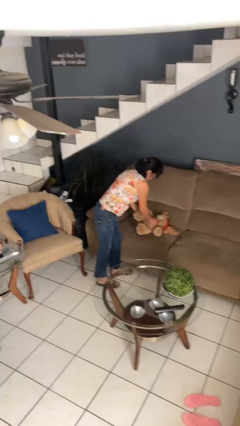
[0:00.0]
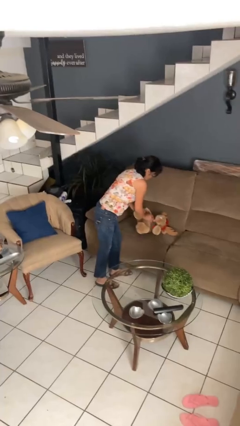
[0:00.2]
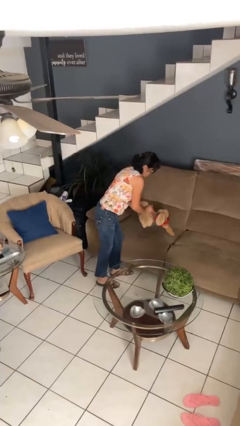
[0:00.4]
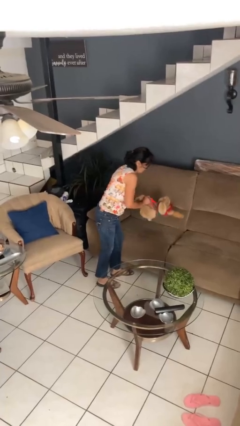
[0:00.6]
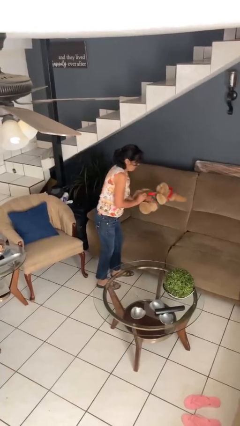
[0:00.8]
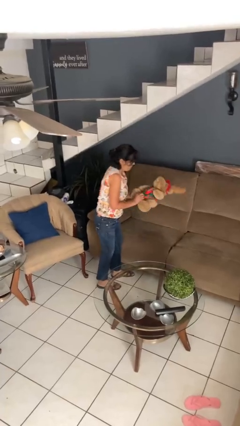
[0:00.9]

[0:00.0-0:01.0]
person picks up object from couch

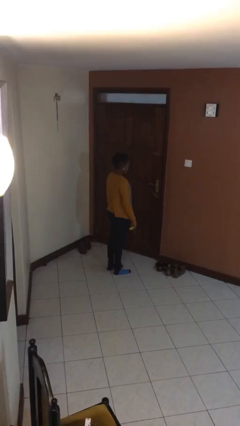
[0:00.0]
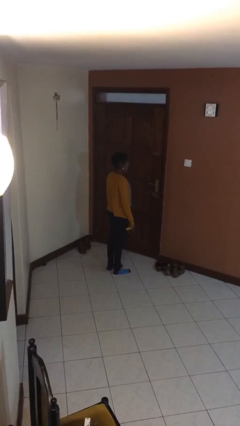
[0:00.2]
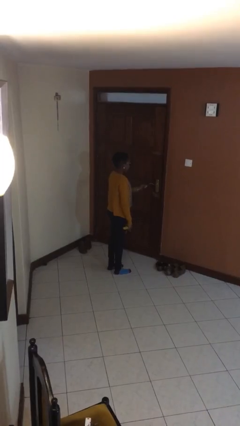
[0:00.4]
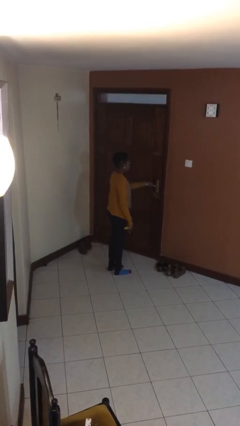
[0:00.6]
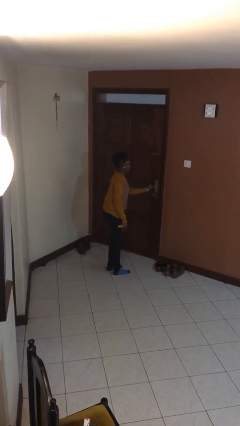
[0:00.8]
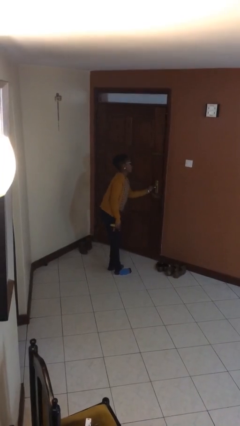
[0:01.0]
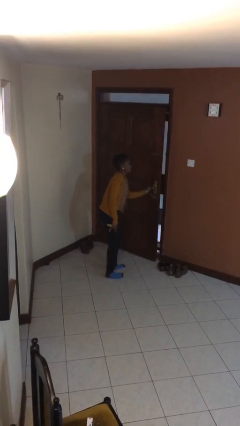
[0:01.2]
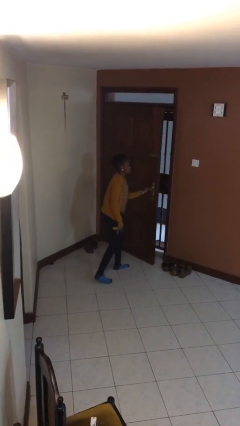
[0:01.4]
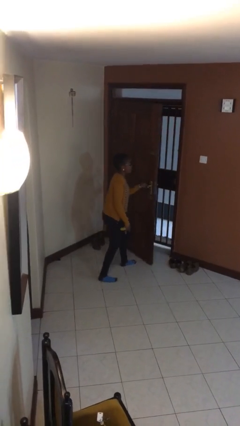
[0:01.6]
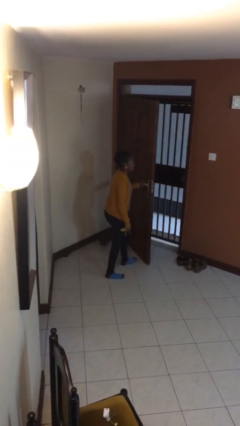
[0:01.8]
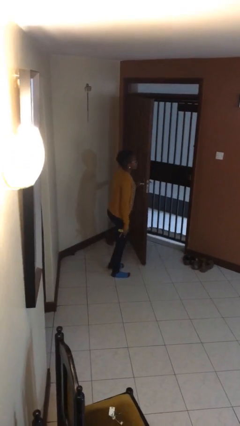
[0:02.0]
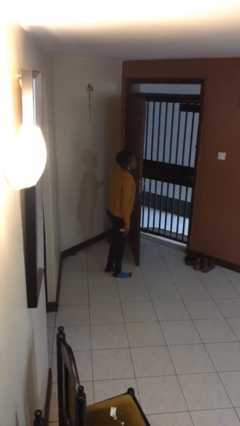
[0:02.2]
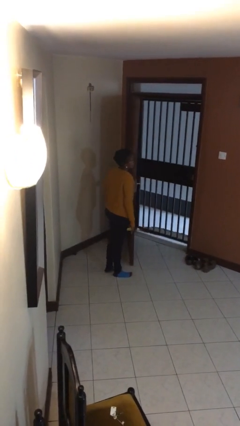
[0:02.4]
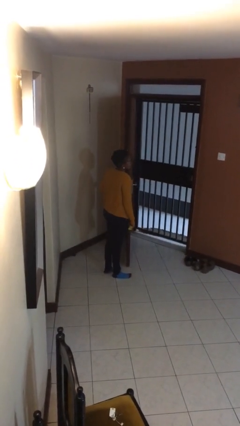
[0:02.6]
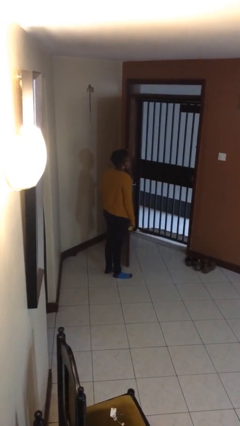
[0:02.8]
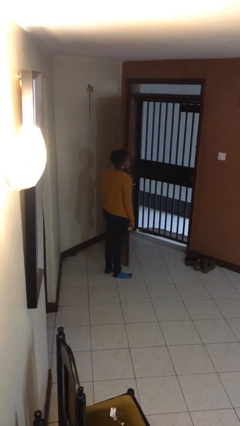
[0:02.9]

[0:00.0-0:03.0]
person opens facility door

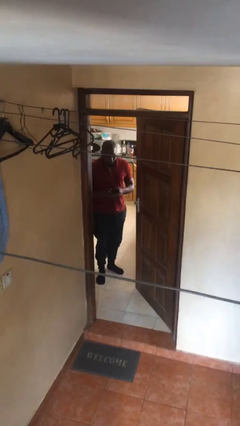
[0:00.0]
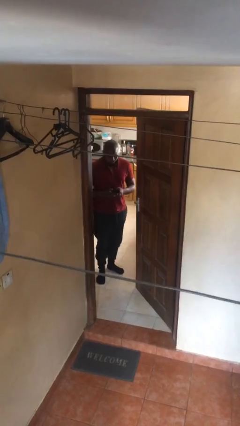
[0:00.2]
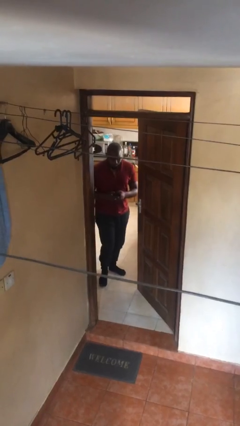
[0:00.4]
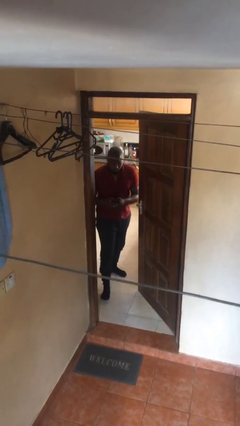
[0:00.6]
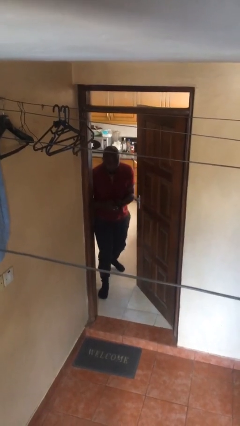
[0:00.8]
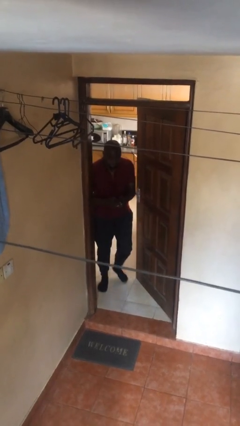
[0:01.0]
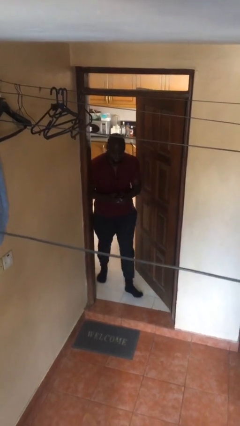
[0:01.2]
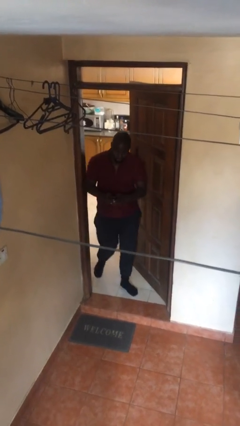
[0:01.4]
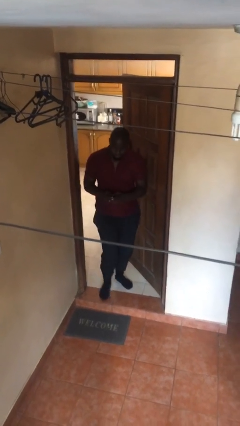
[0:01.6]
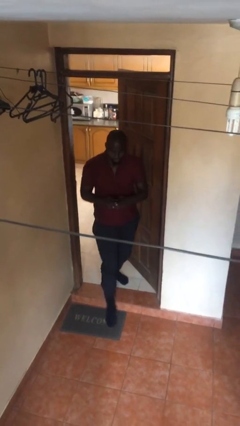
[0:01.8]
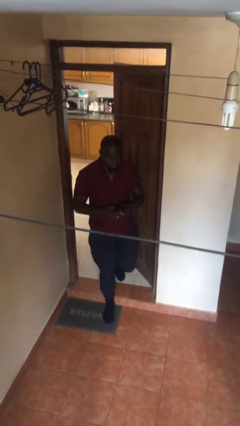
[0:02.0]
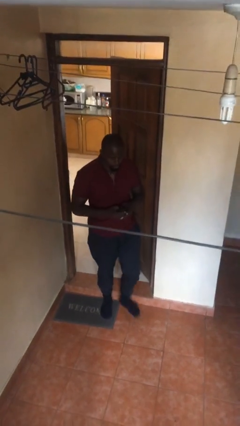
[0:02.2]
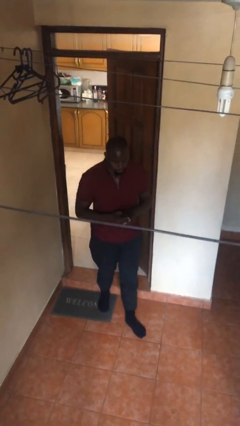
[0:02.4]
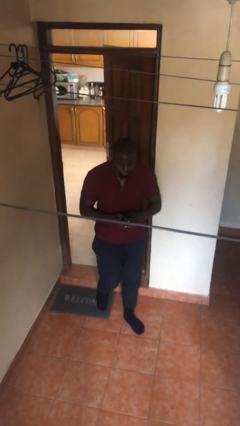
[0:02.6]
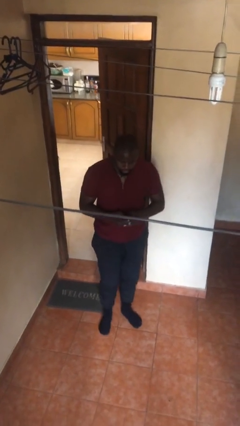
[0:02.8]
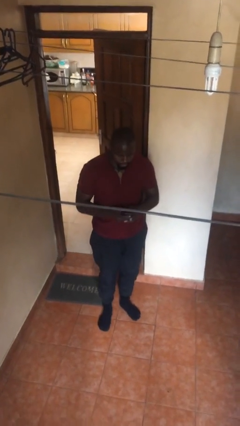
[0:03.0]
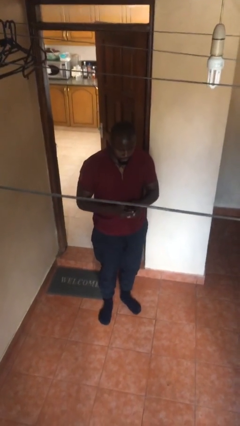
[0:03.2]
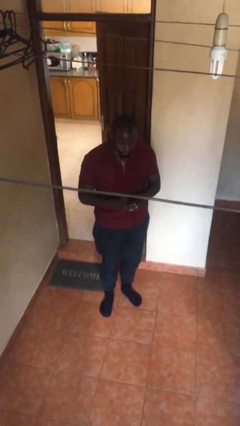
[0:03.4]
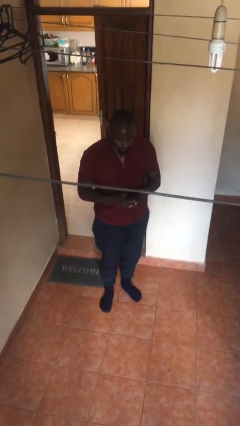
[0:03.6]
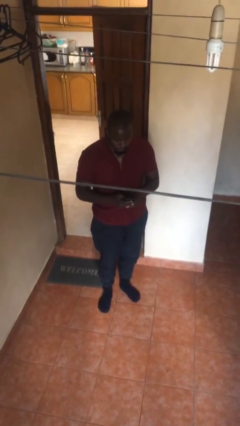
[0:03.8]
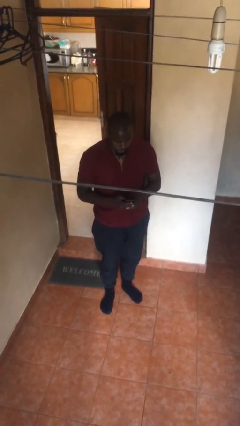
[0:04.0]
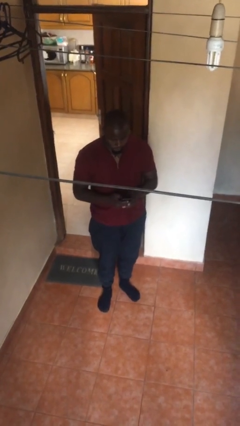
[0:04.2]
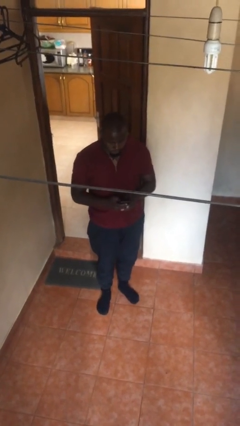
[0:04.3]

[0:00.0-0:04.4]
person enters scene through structure

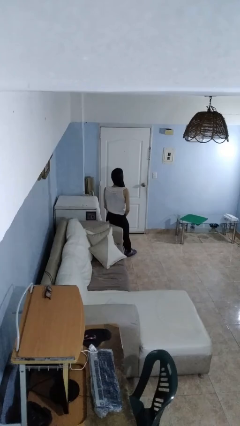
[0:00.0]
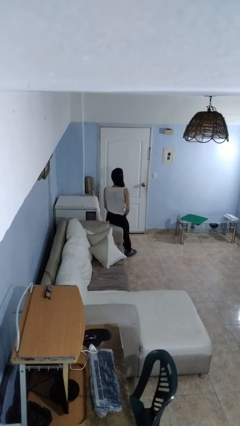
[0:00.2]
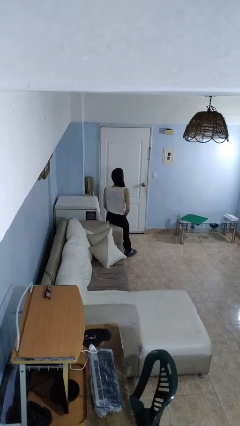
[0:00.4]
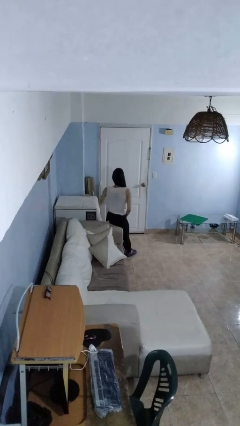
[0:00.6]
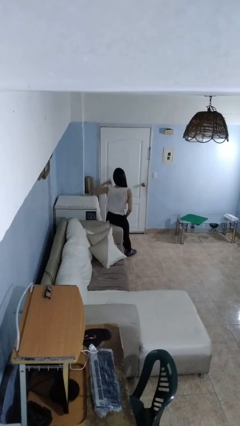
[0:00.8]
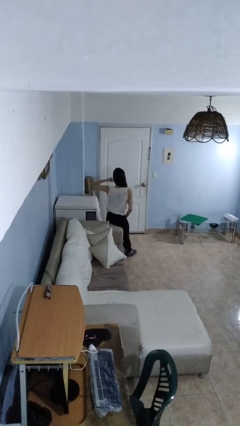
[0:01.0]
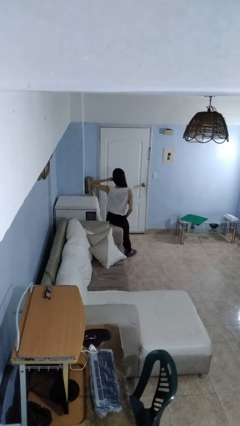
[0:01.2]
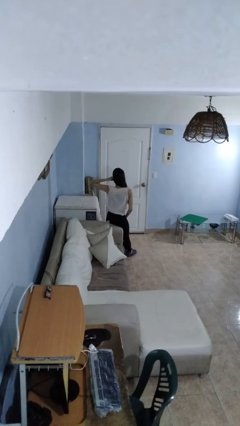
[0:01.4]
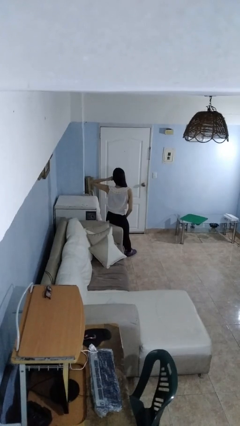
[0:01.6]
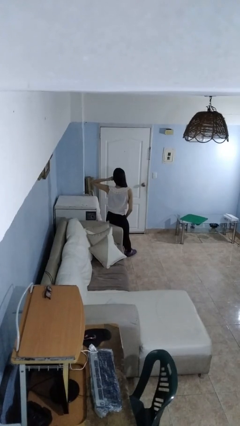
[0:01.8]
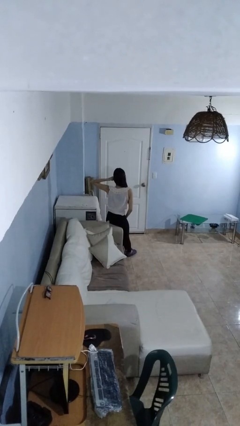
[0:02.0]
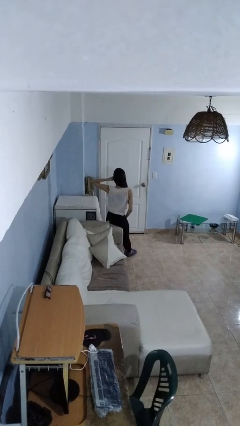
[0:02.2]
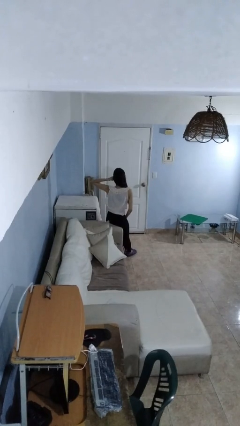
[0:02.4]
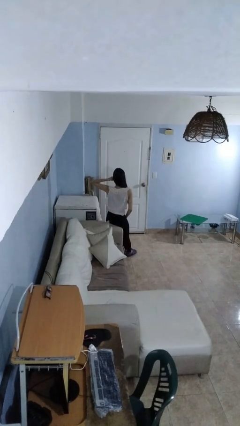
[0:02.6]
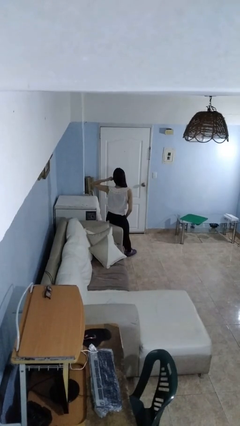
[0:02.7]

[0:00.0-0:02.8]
person gestures call me

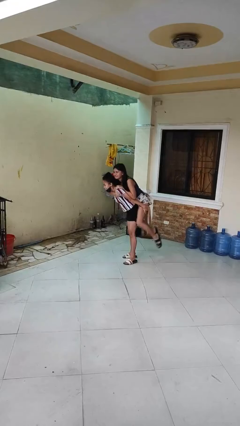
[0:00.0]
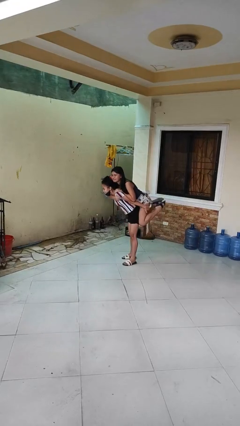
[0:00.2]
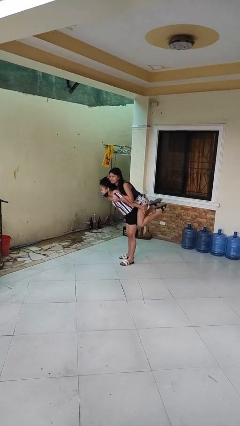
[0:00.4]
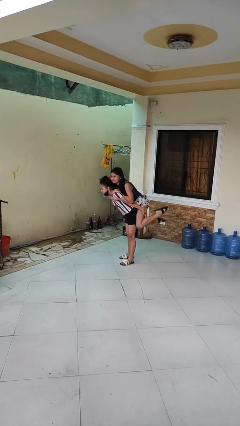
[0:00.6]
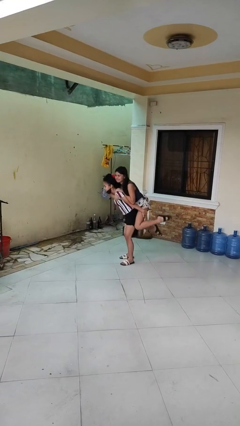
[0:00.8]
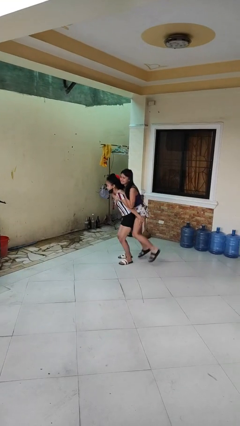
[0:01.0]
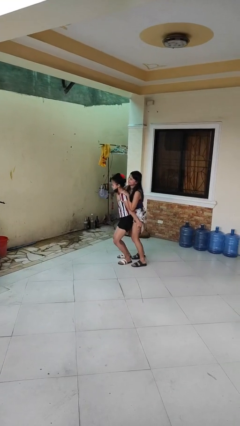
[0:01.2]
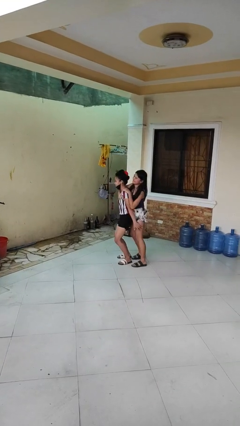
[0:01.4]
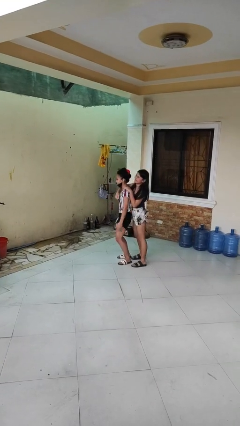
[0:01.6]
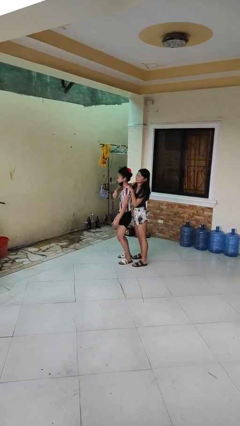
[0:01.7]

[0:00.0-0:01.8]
person puts down person

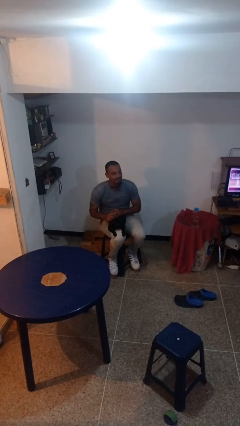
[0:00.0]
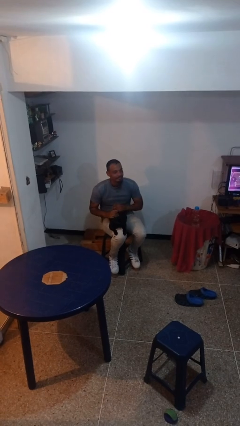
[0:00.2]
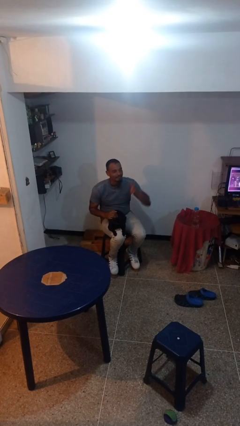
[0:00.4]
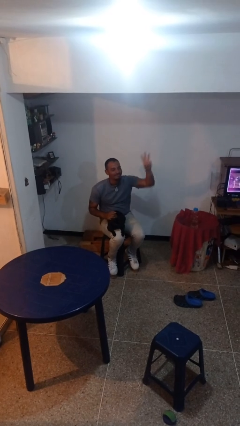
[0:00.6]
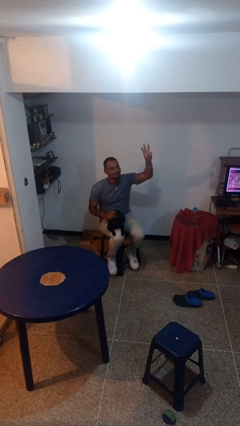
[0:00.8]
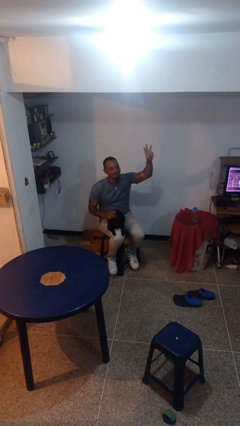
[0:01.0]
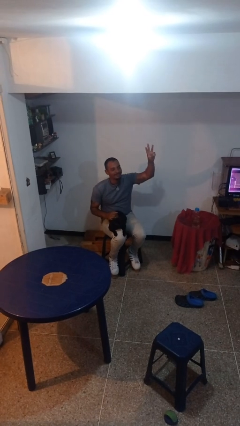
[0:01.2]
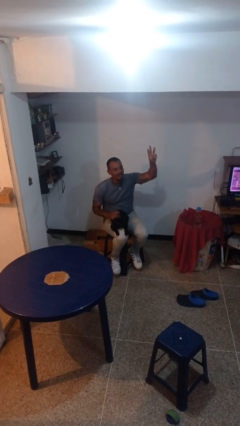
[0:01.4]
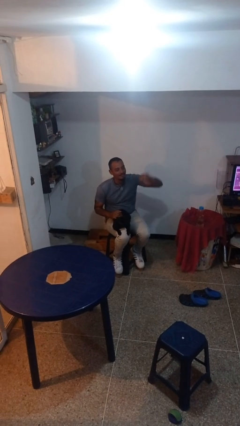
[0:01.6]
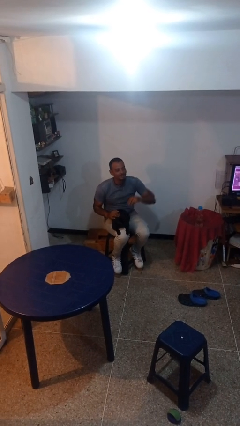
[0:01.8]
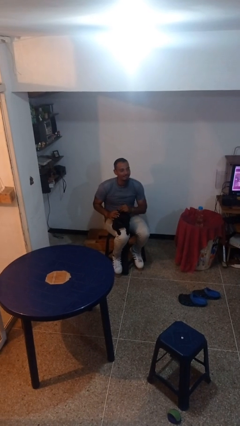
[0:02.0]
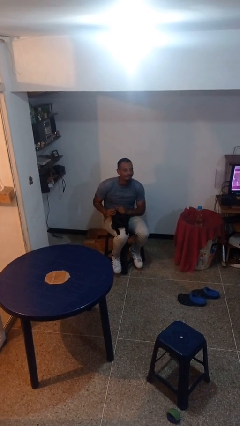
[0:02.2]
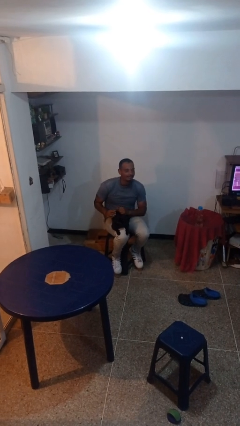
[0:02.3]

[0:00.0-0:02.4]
person gestures number three

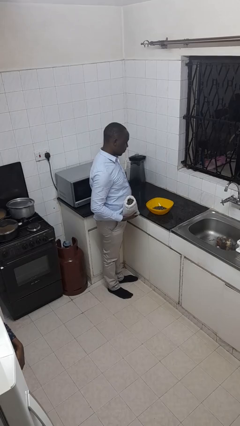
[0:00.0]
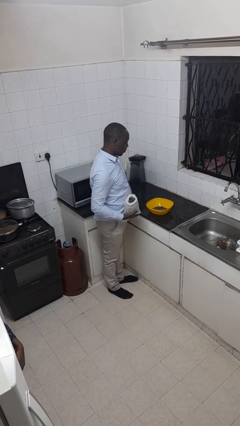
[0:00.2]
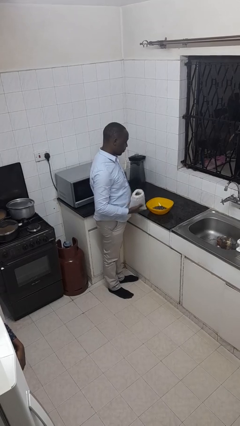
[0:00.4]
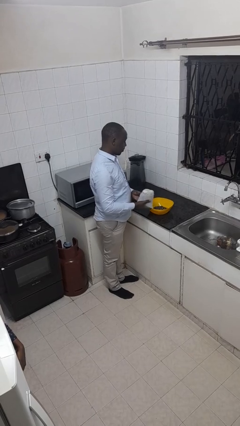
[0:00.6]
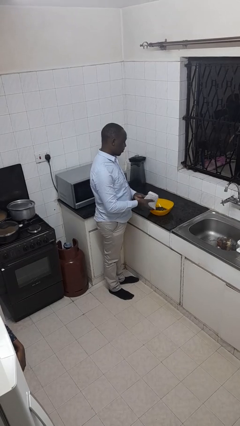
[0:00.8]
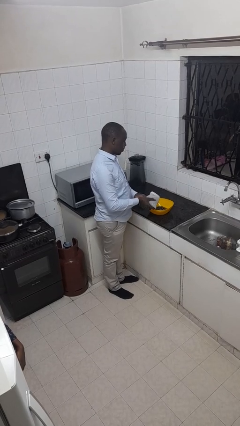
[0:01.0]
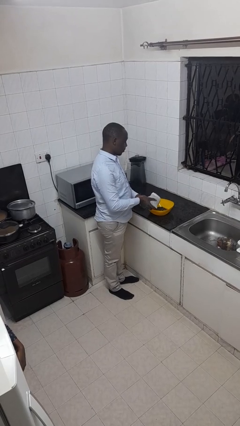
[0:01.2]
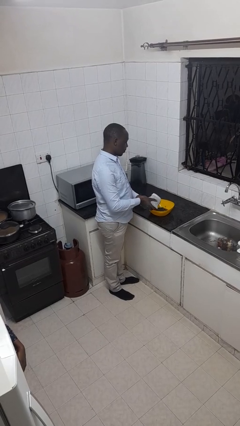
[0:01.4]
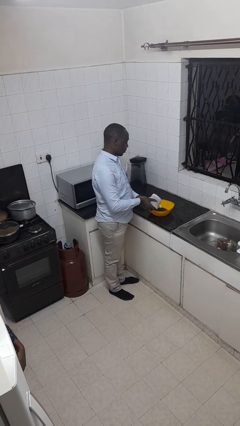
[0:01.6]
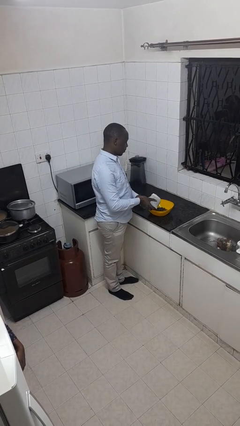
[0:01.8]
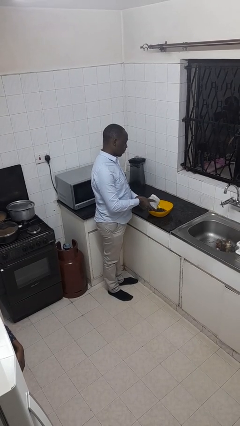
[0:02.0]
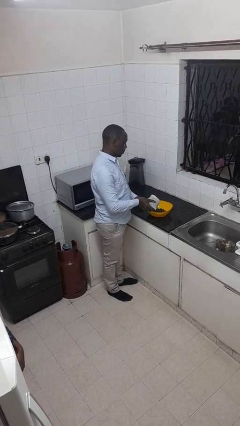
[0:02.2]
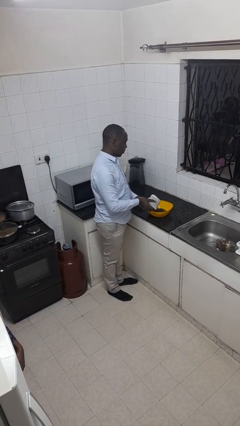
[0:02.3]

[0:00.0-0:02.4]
person pours into bowl
